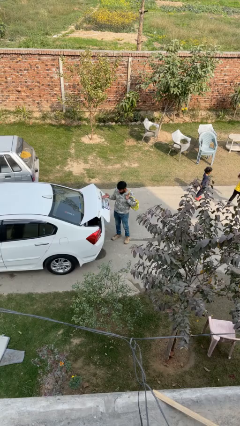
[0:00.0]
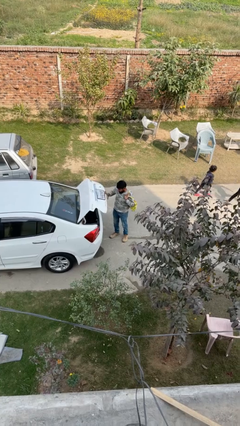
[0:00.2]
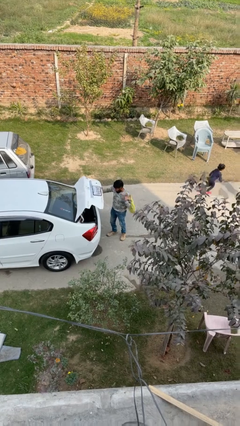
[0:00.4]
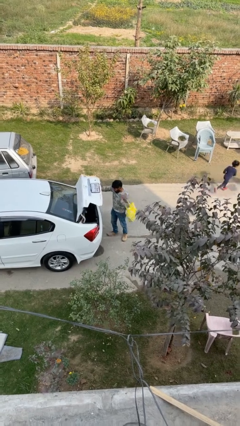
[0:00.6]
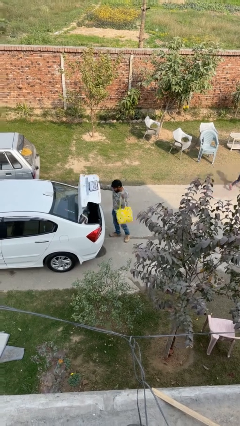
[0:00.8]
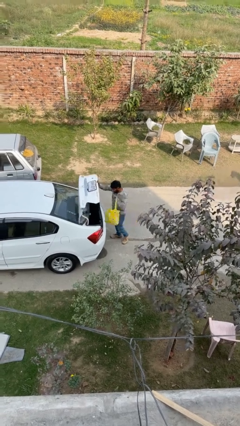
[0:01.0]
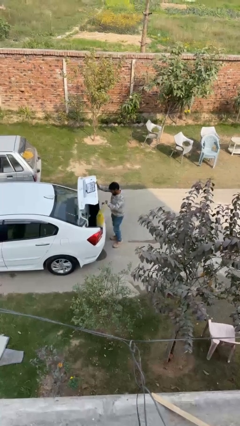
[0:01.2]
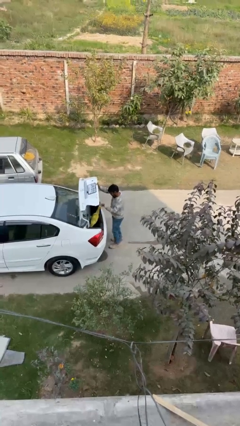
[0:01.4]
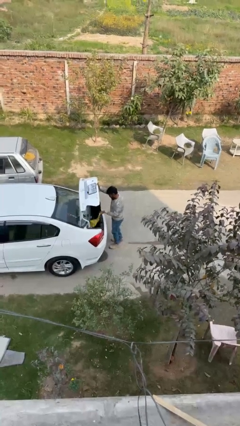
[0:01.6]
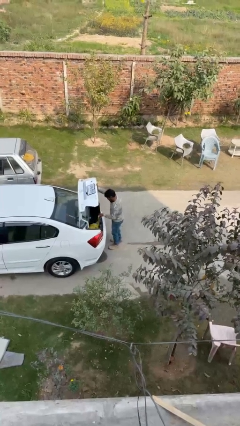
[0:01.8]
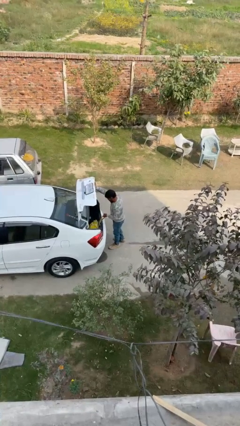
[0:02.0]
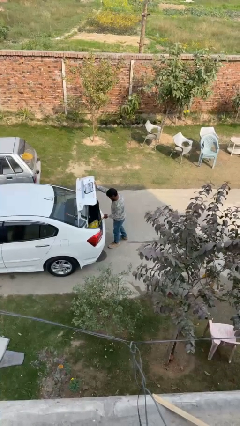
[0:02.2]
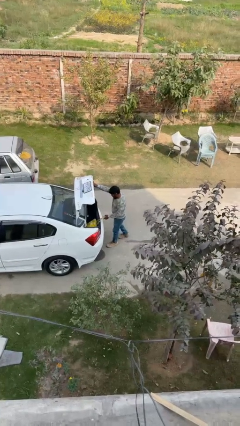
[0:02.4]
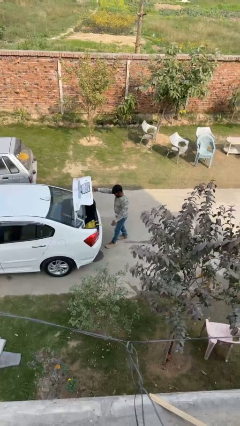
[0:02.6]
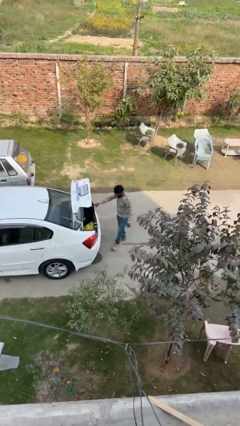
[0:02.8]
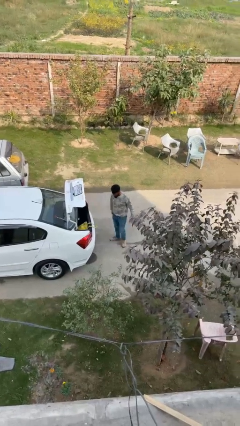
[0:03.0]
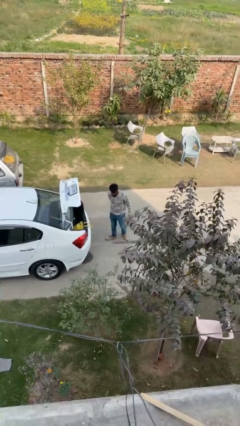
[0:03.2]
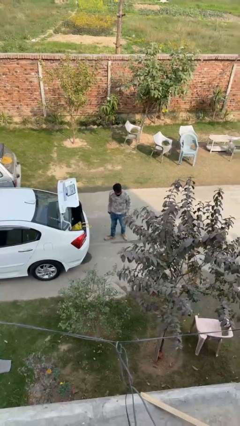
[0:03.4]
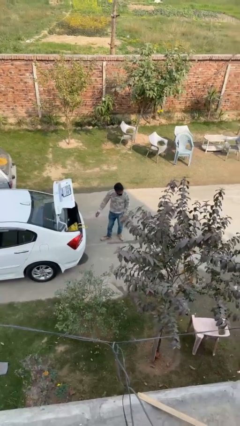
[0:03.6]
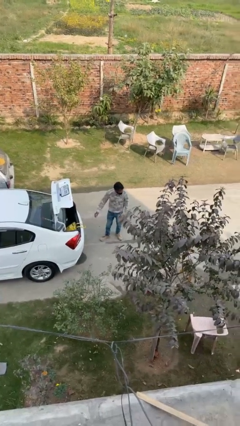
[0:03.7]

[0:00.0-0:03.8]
person loads car

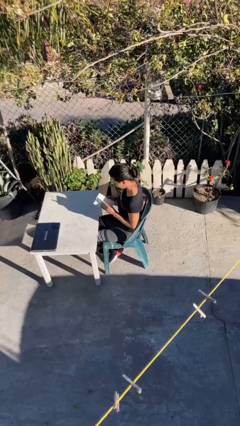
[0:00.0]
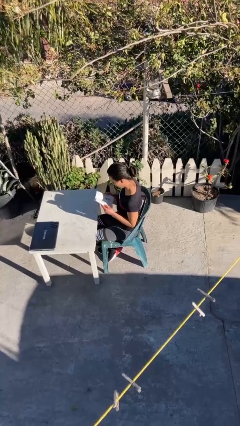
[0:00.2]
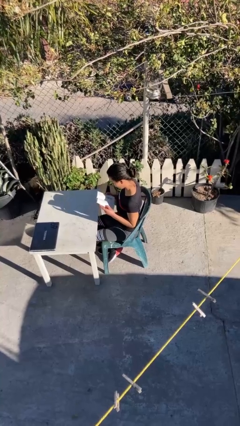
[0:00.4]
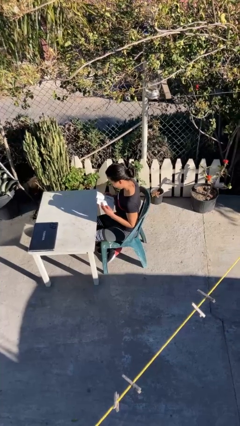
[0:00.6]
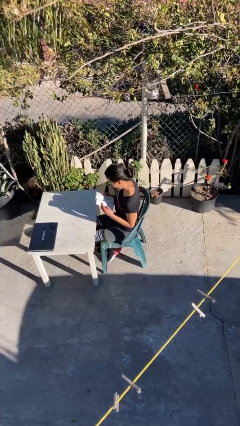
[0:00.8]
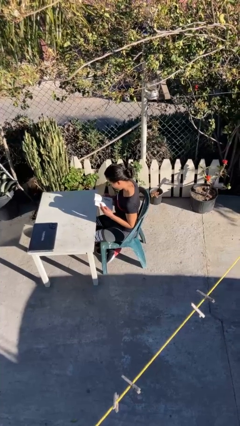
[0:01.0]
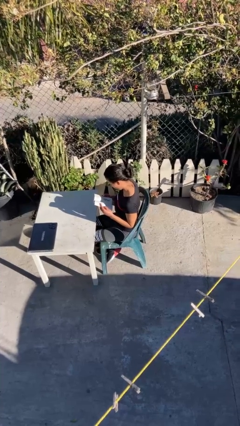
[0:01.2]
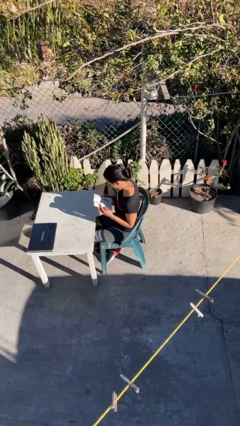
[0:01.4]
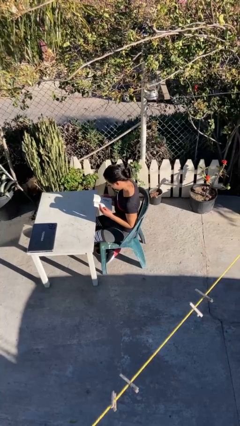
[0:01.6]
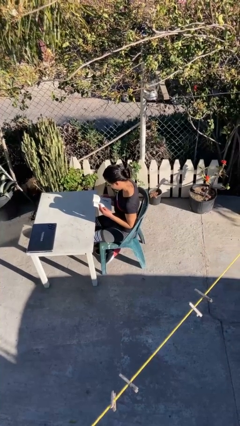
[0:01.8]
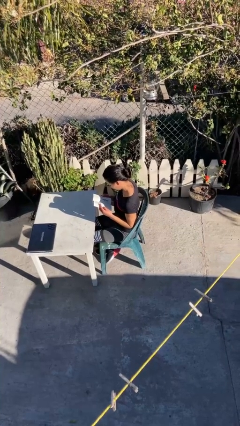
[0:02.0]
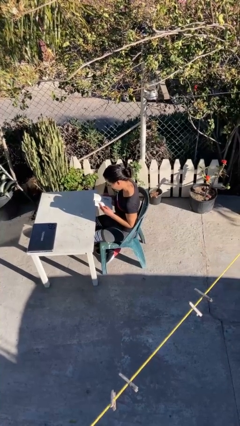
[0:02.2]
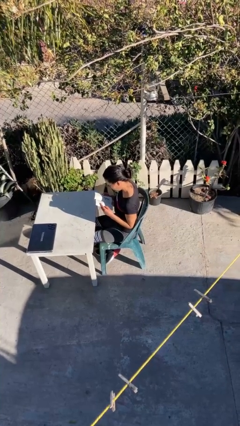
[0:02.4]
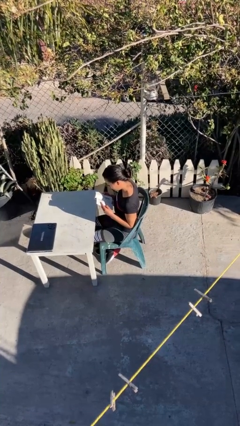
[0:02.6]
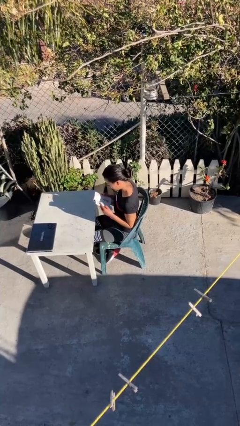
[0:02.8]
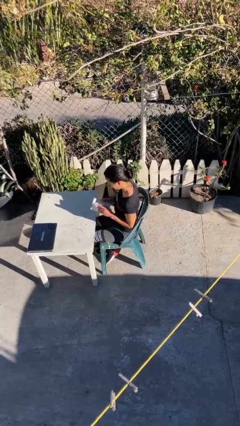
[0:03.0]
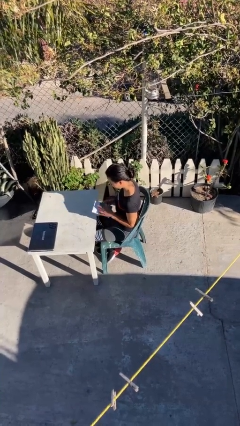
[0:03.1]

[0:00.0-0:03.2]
person reads document

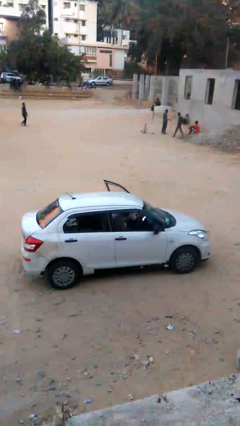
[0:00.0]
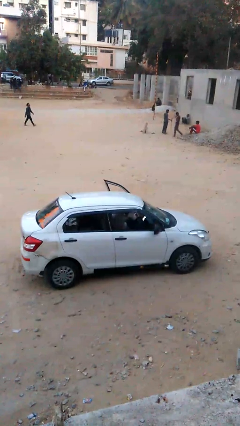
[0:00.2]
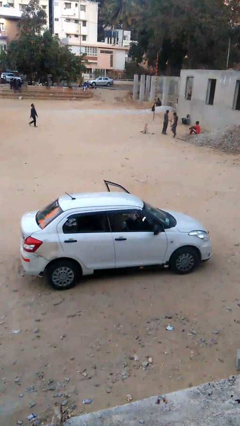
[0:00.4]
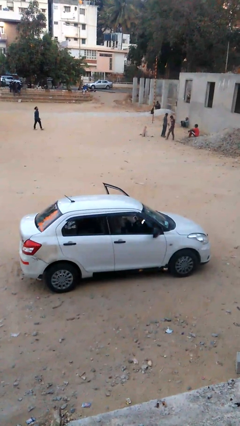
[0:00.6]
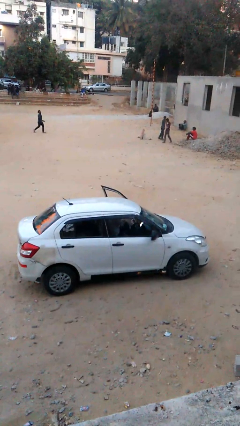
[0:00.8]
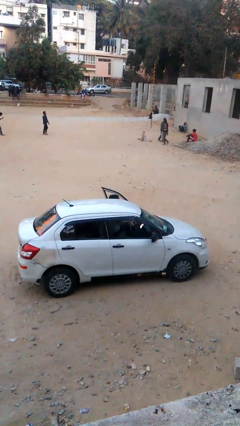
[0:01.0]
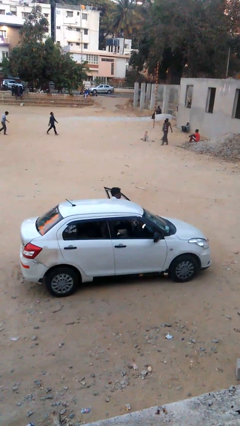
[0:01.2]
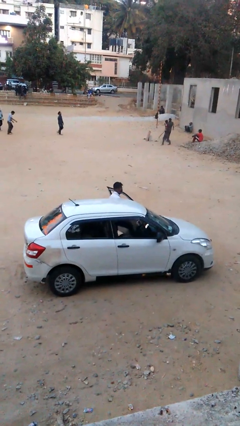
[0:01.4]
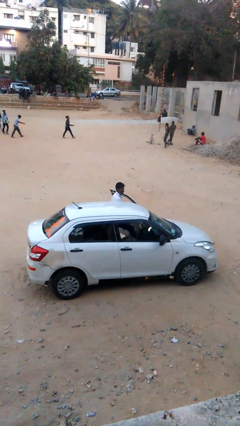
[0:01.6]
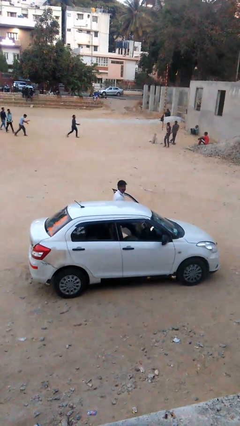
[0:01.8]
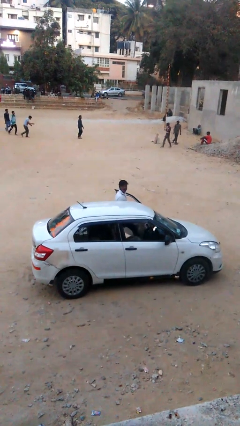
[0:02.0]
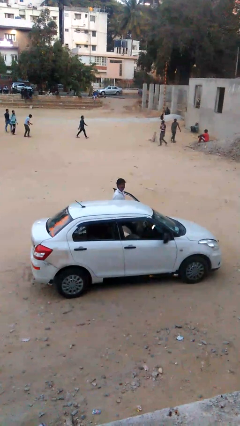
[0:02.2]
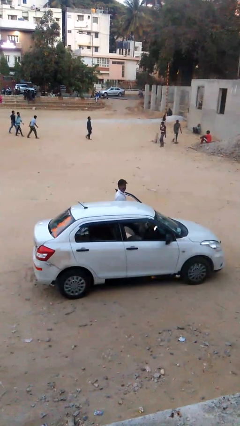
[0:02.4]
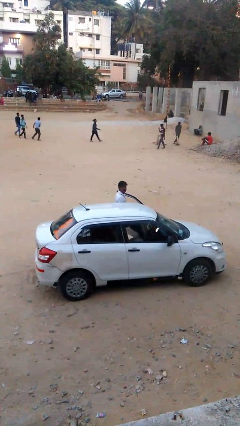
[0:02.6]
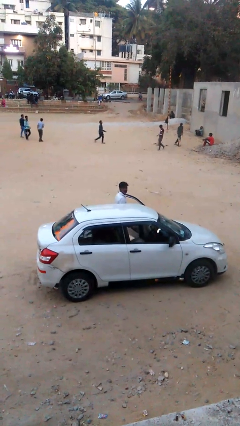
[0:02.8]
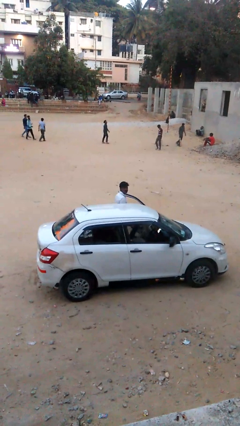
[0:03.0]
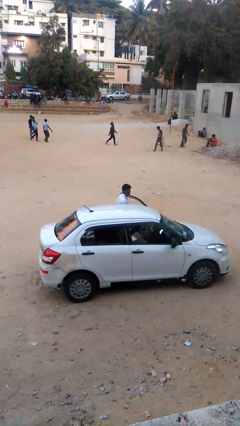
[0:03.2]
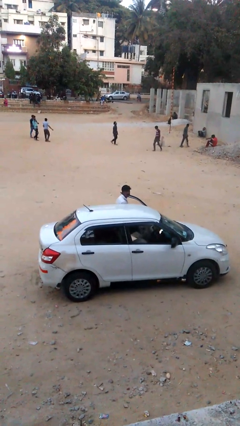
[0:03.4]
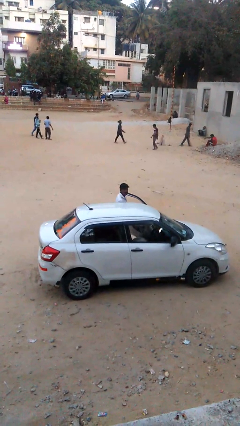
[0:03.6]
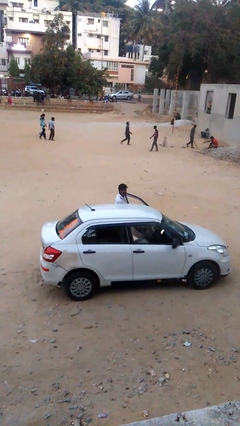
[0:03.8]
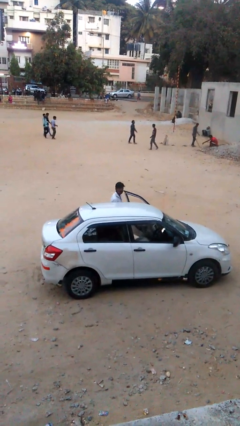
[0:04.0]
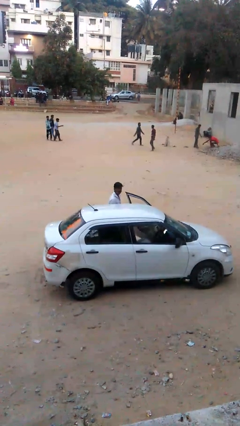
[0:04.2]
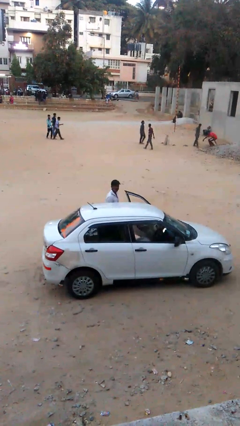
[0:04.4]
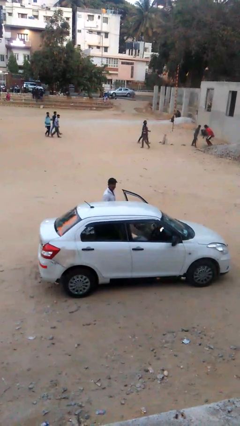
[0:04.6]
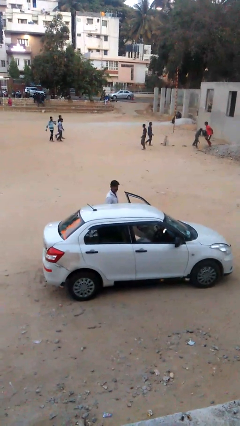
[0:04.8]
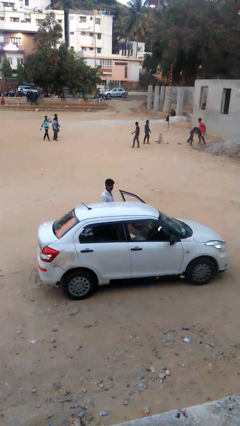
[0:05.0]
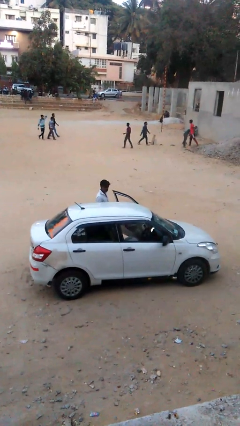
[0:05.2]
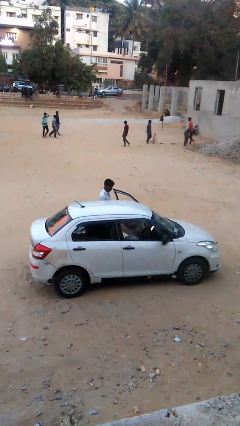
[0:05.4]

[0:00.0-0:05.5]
person exits car

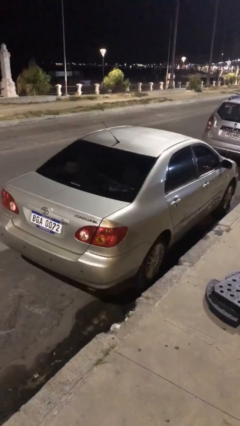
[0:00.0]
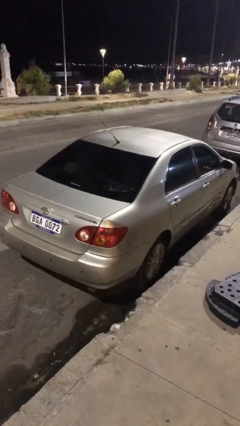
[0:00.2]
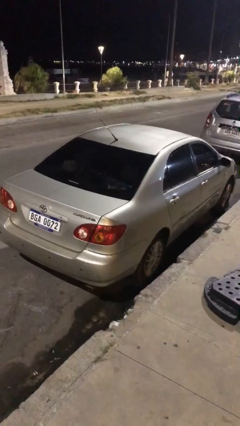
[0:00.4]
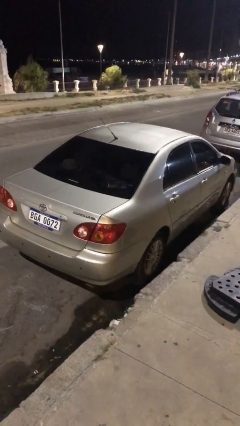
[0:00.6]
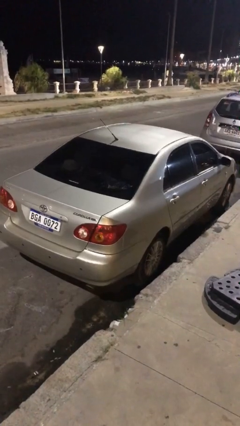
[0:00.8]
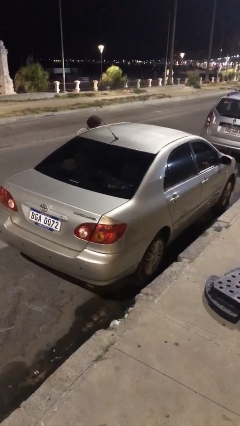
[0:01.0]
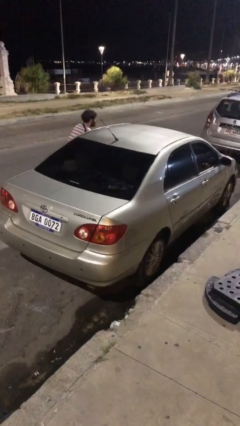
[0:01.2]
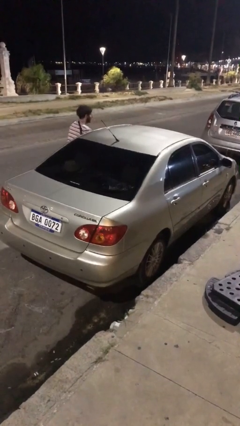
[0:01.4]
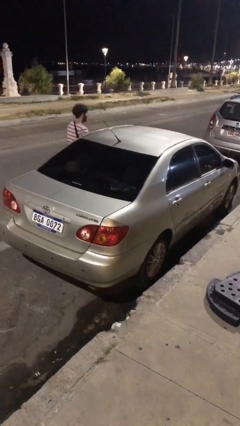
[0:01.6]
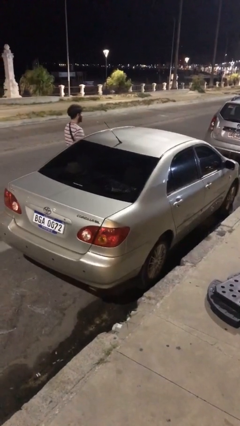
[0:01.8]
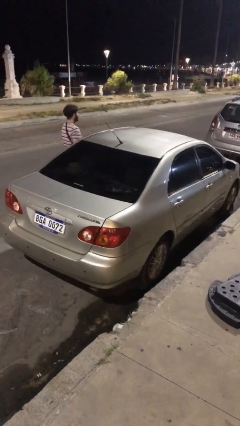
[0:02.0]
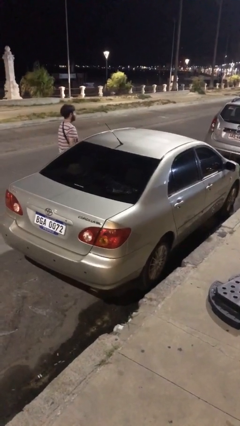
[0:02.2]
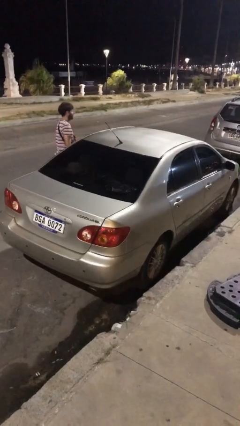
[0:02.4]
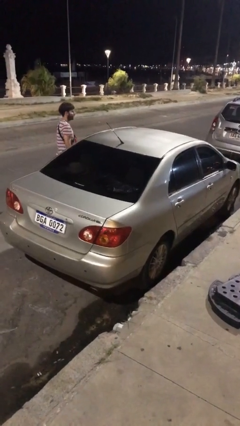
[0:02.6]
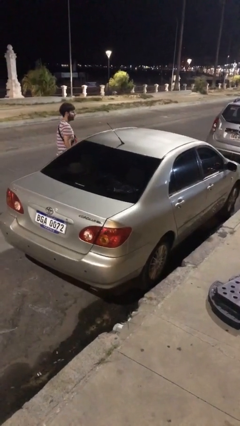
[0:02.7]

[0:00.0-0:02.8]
car drops off person

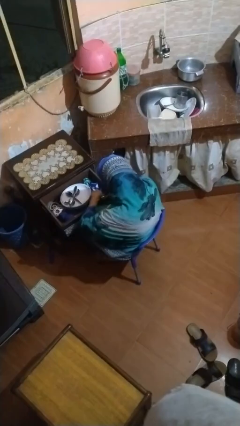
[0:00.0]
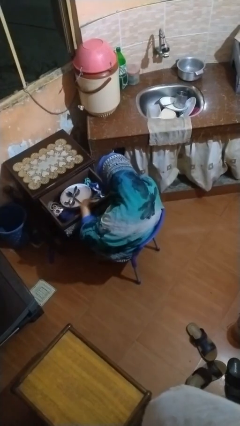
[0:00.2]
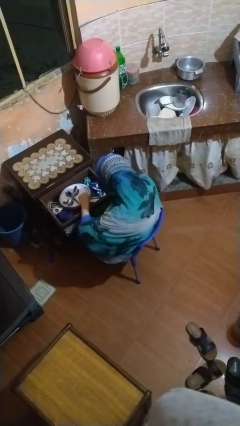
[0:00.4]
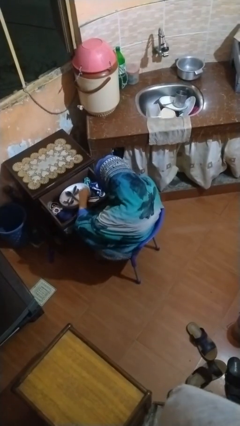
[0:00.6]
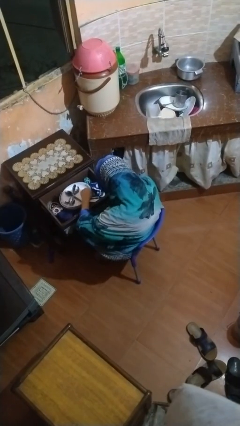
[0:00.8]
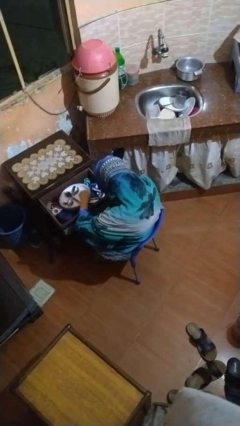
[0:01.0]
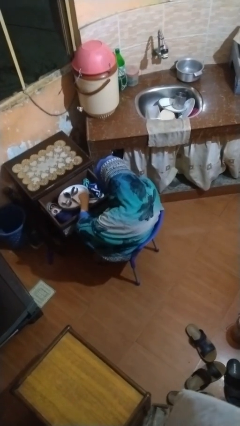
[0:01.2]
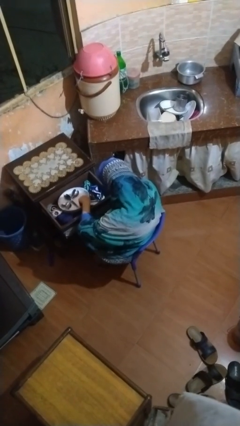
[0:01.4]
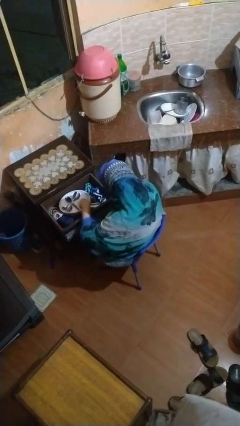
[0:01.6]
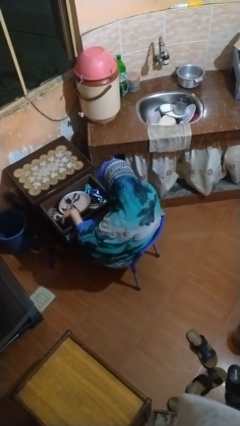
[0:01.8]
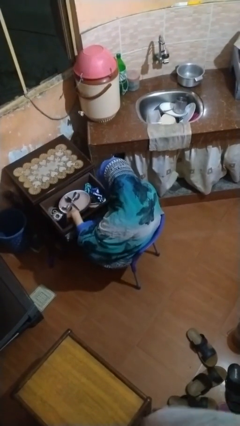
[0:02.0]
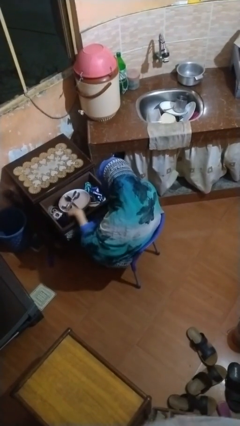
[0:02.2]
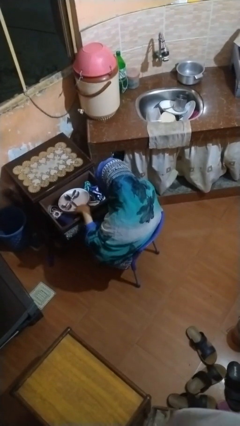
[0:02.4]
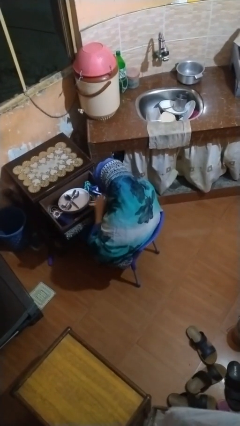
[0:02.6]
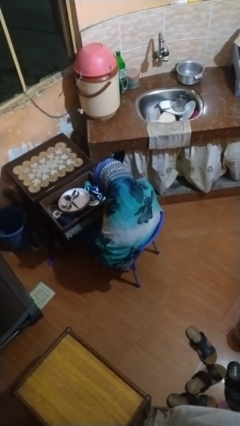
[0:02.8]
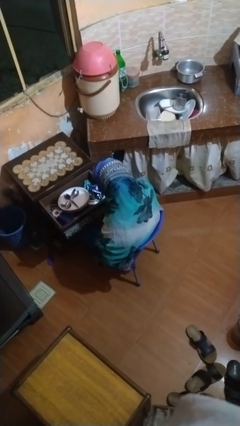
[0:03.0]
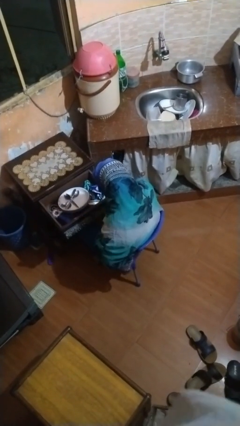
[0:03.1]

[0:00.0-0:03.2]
person searches in kitchen drawer
